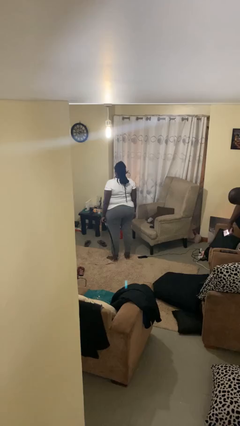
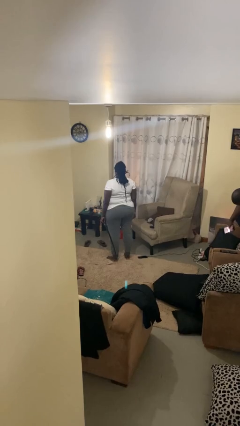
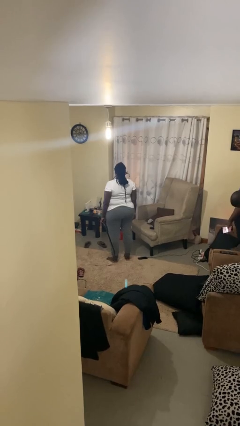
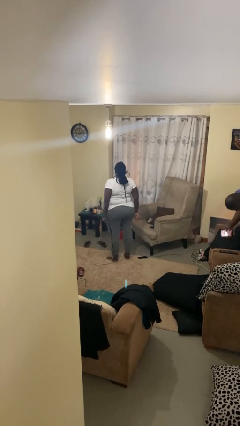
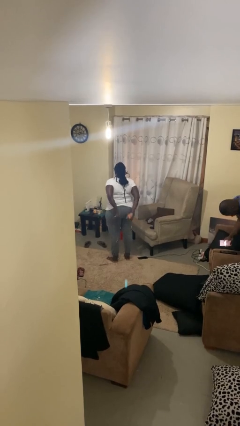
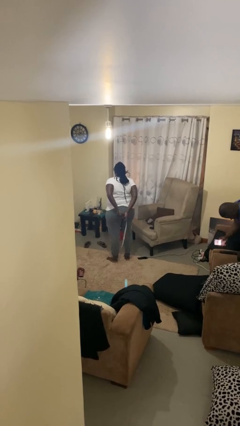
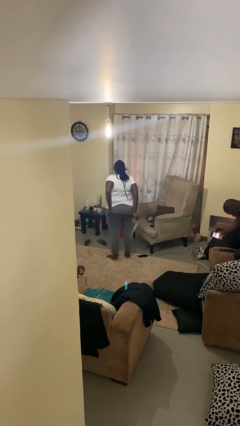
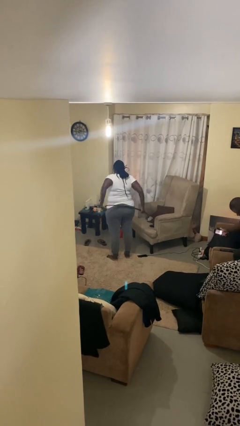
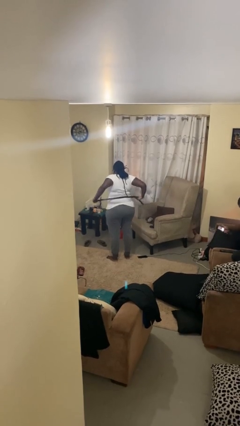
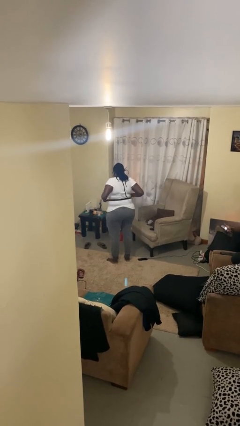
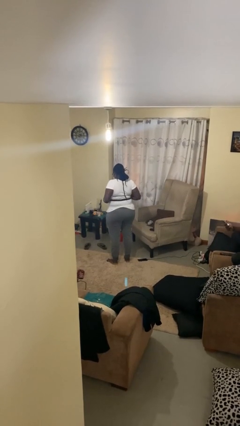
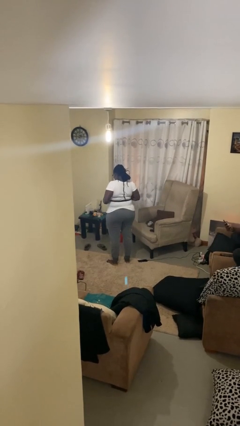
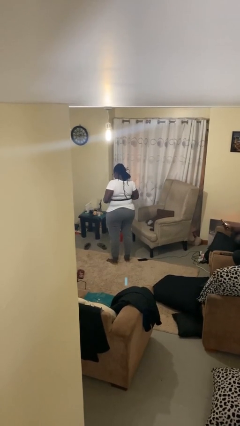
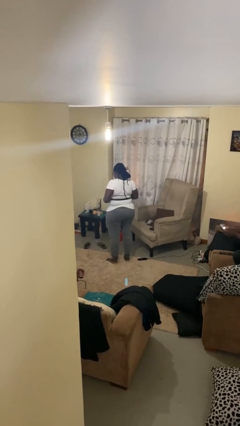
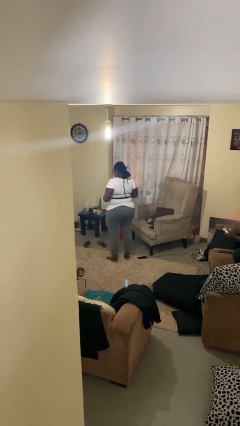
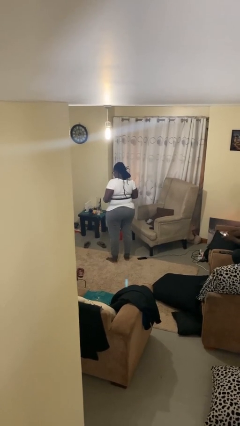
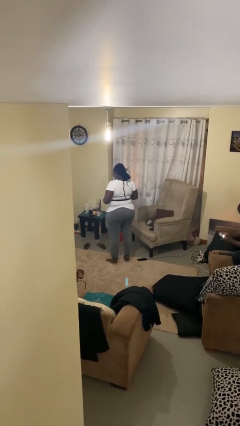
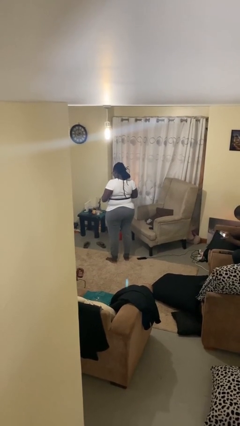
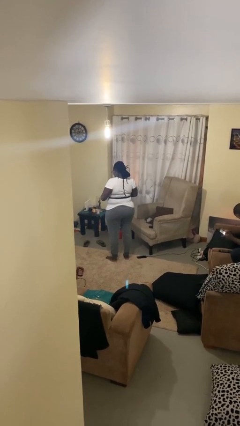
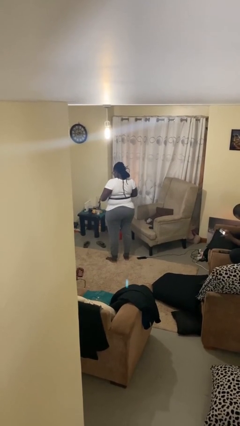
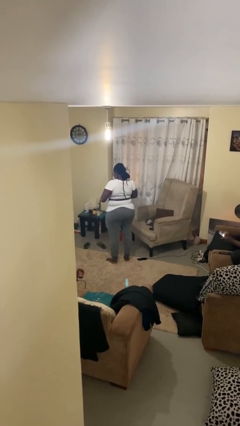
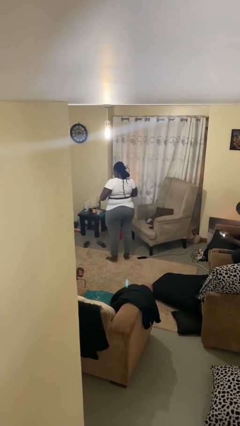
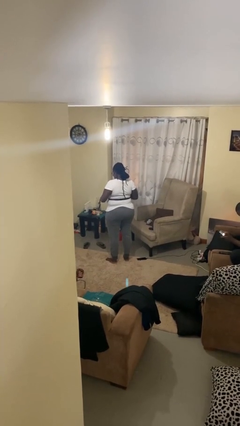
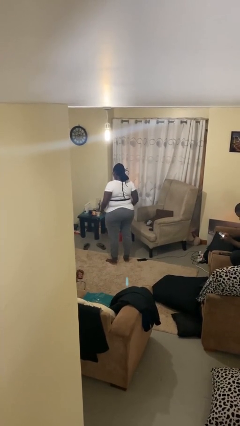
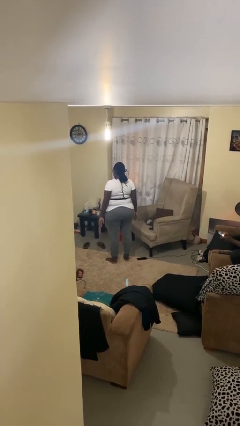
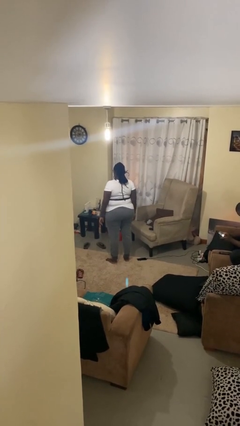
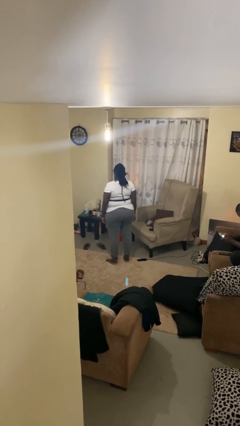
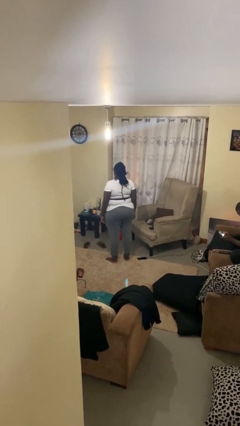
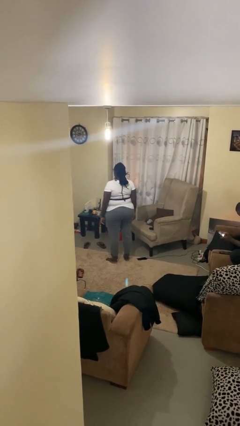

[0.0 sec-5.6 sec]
person puts on belt

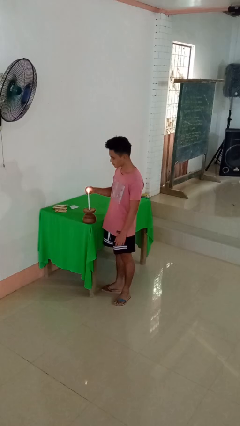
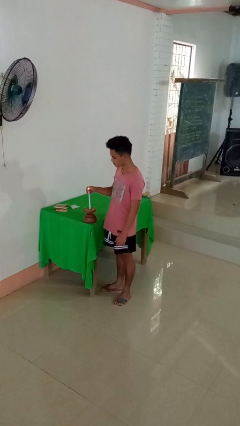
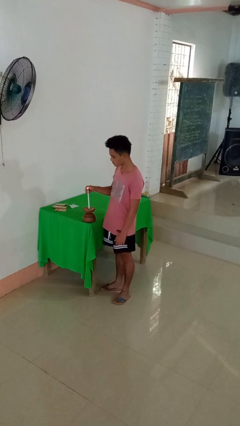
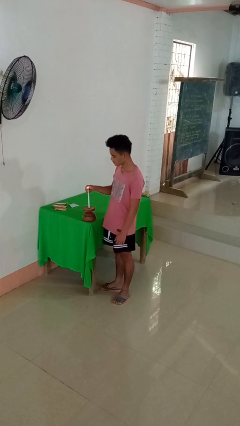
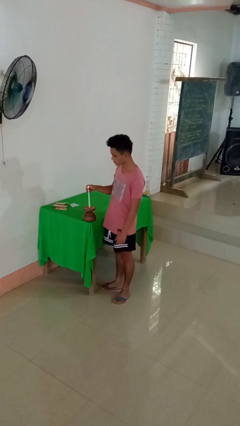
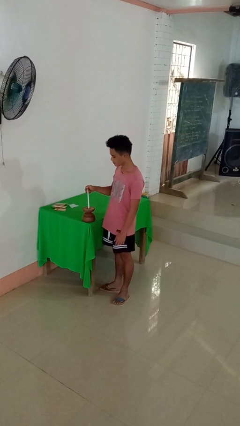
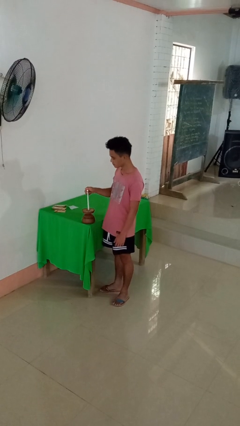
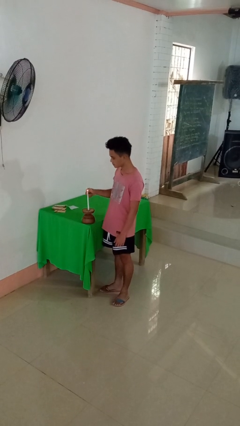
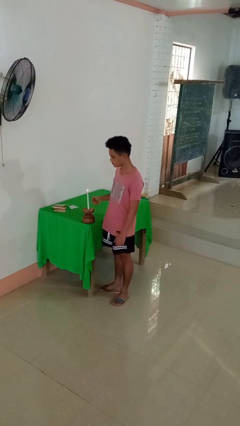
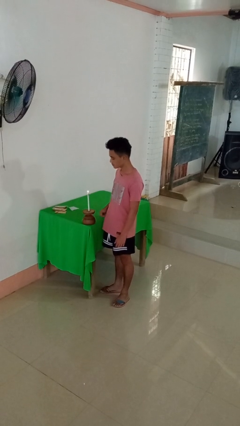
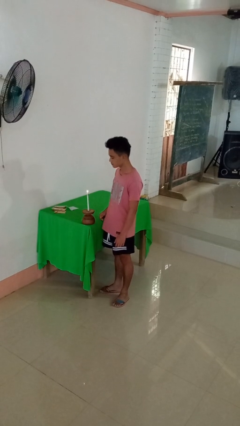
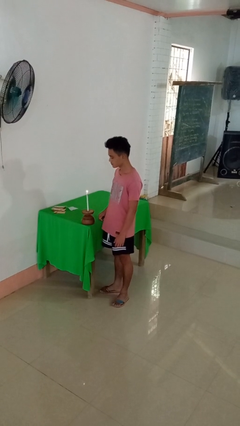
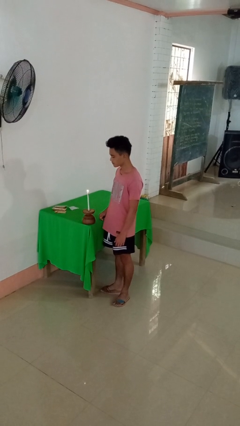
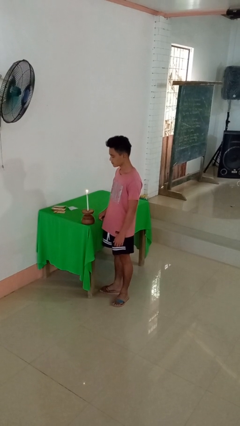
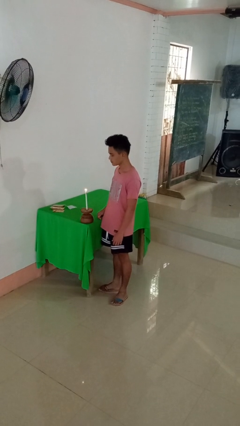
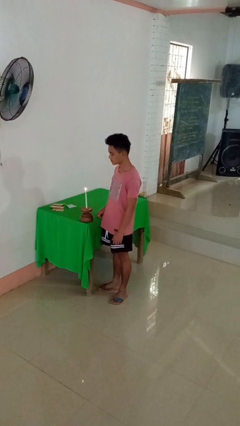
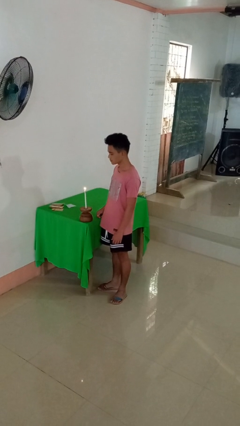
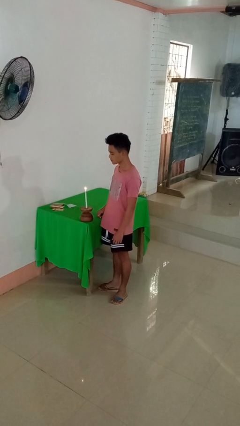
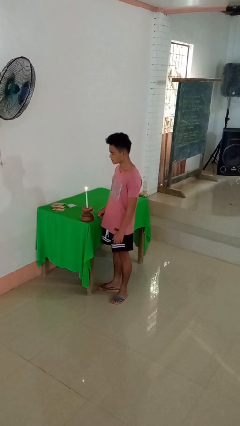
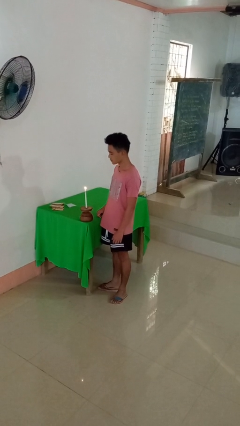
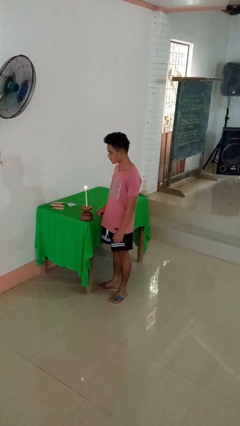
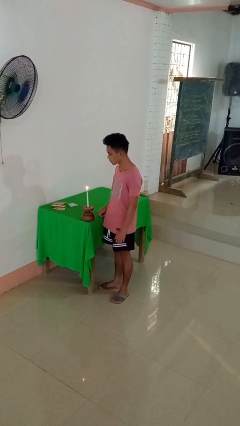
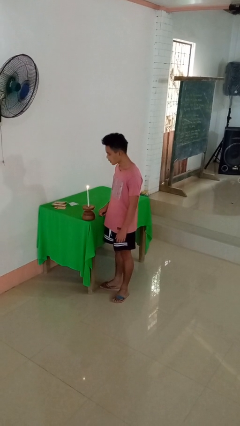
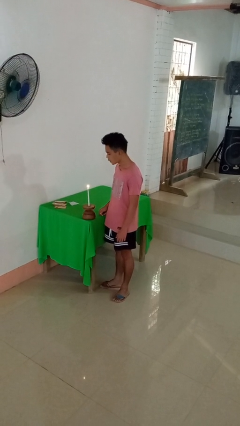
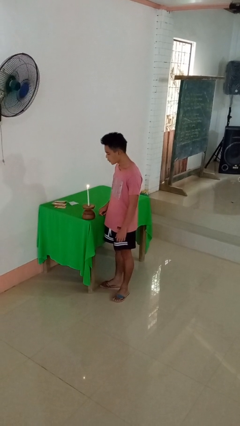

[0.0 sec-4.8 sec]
person lights candle

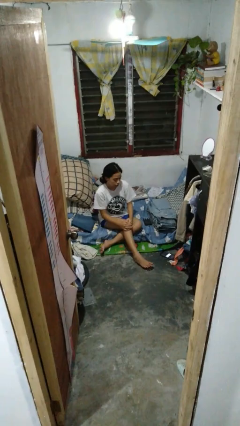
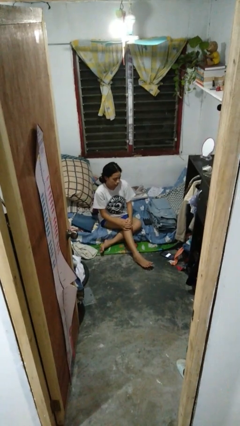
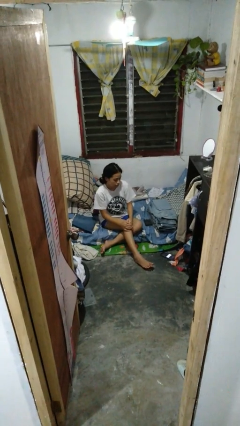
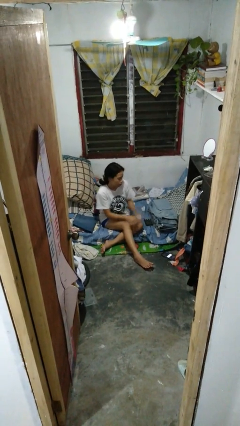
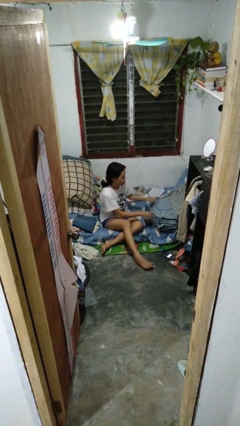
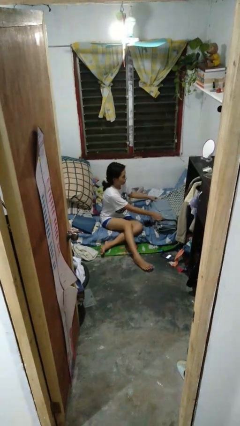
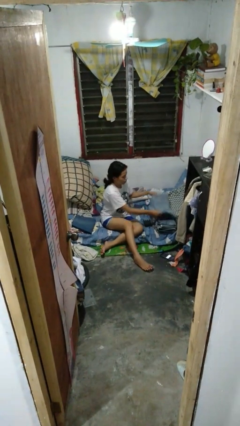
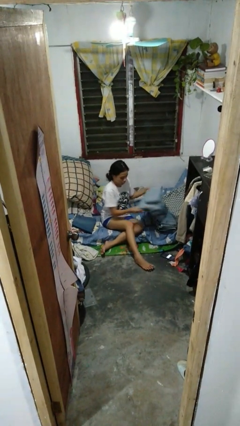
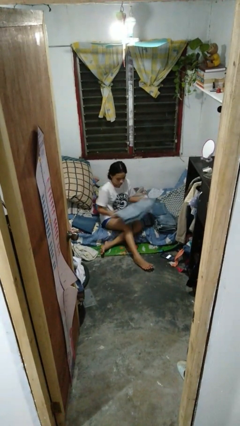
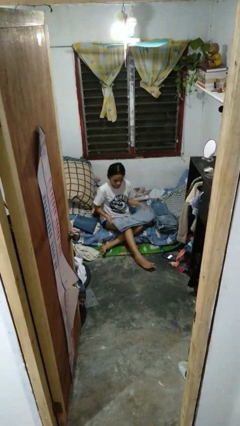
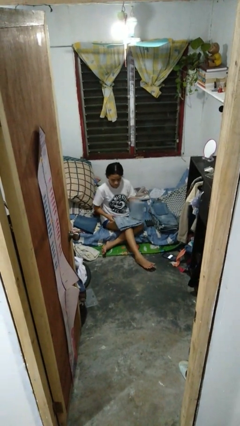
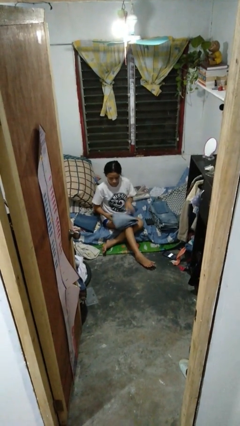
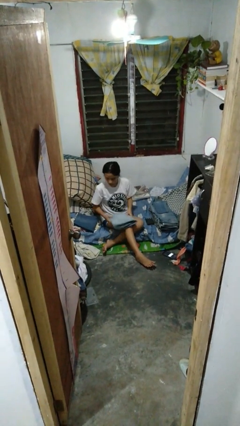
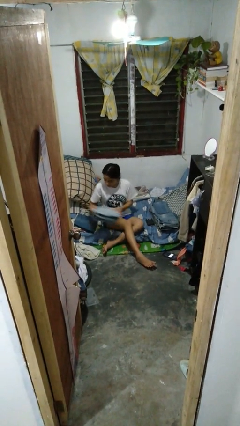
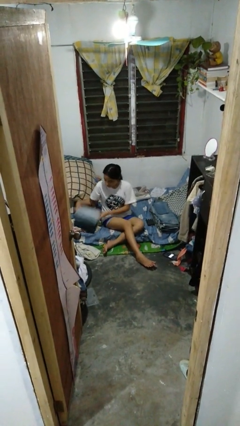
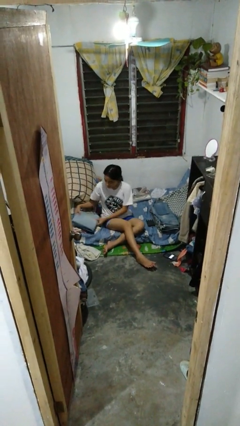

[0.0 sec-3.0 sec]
person folds pants

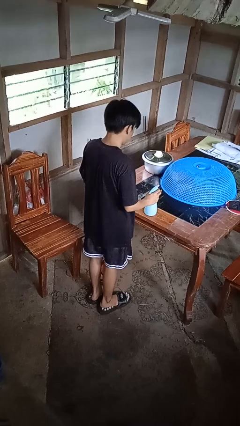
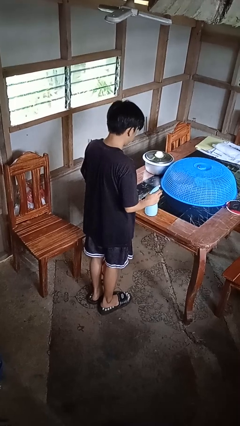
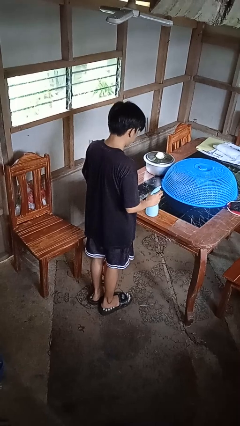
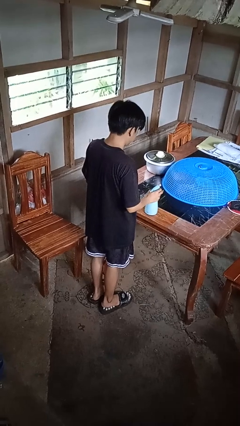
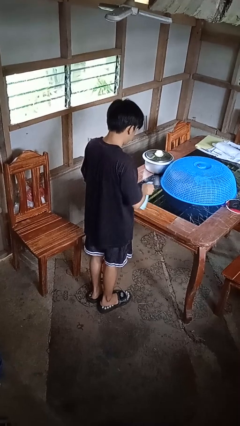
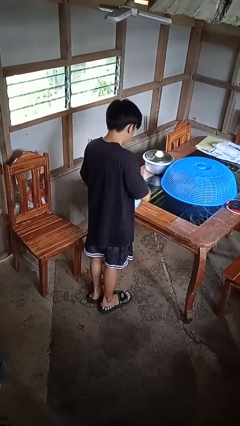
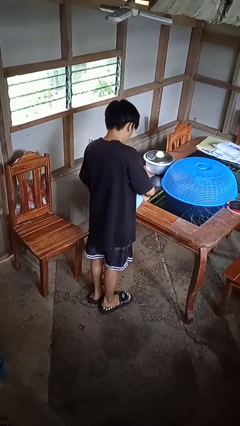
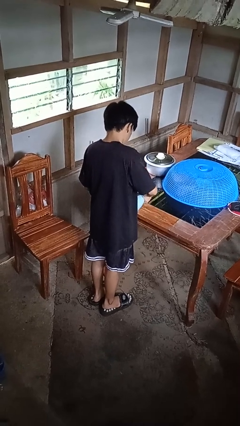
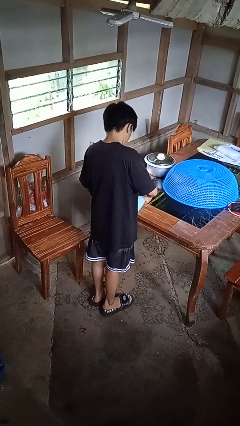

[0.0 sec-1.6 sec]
person sprays from bottle

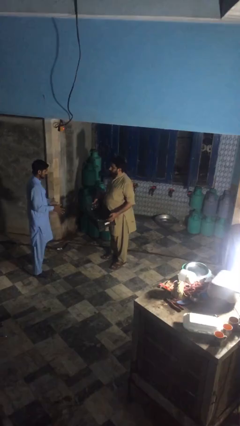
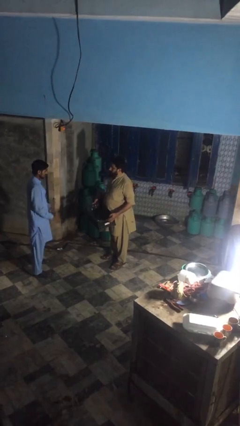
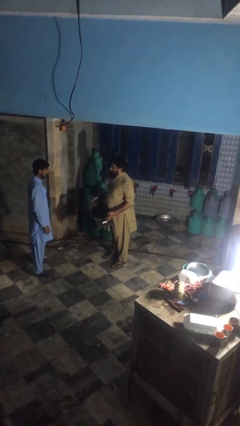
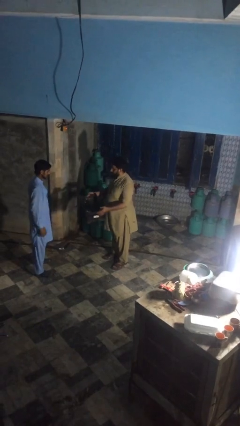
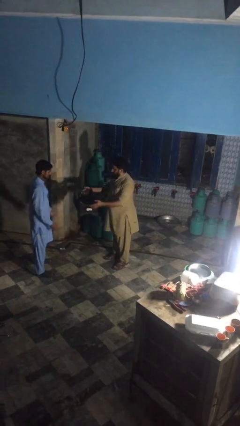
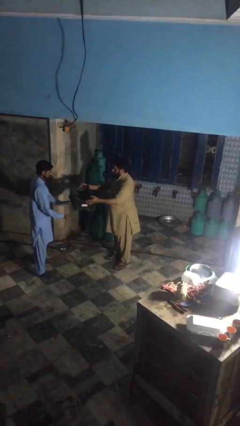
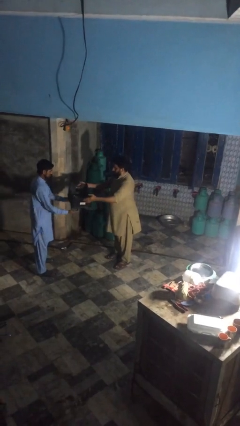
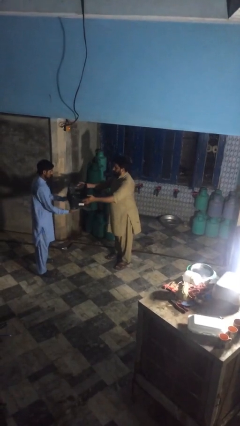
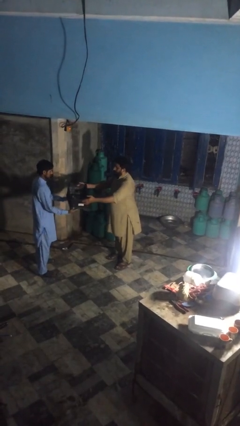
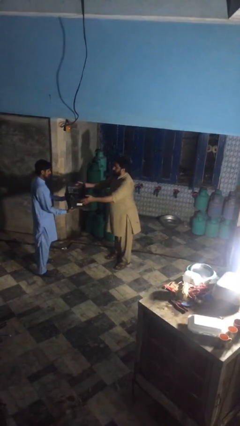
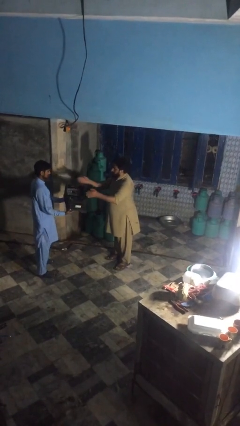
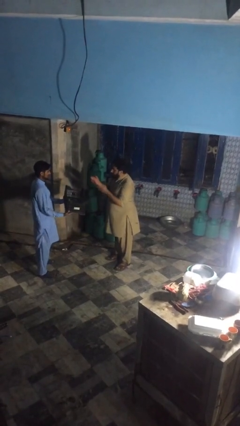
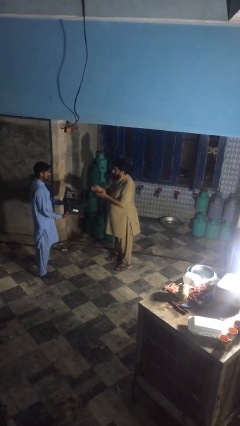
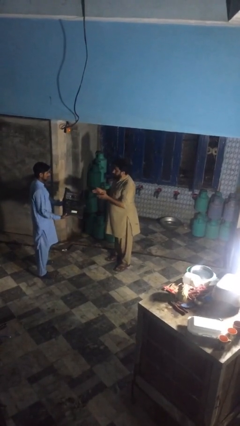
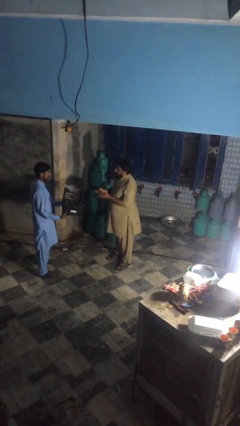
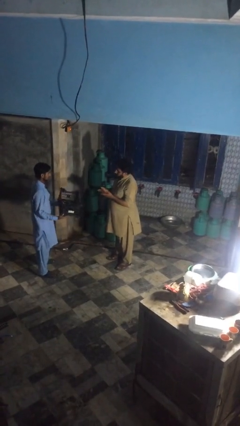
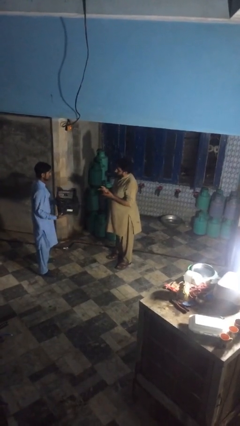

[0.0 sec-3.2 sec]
person transfers object to person
